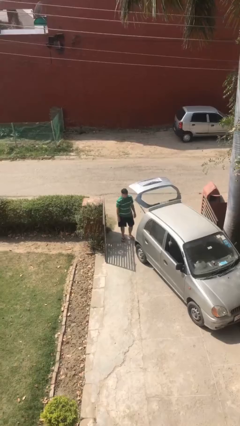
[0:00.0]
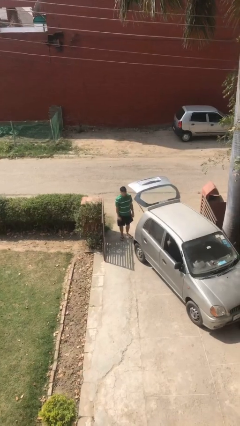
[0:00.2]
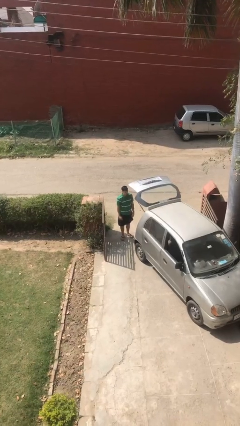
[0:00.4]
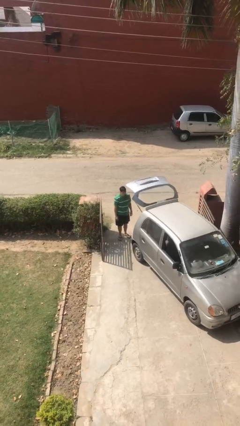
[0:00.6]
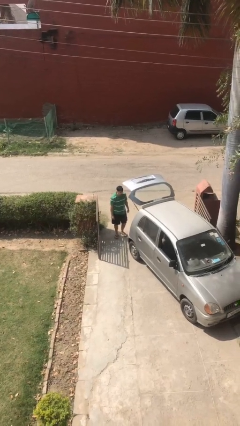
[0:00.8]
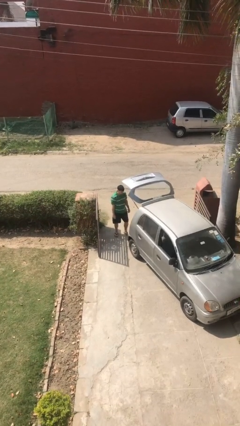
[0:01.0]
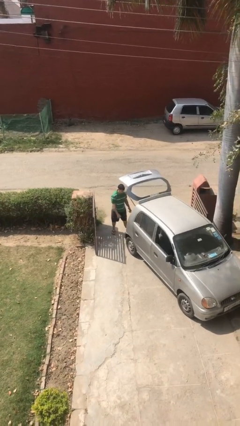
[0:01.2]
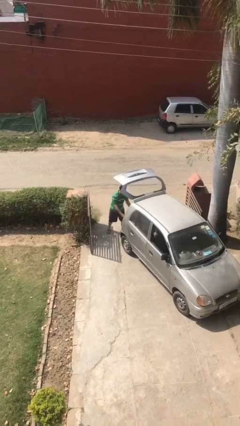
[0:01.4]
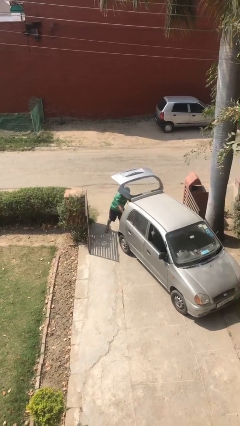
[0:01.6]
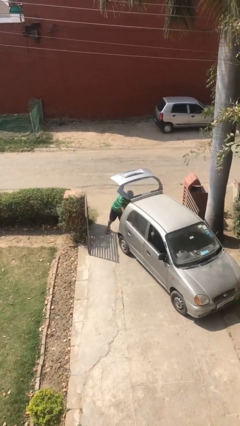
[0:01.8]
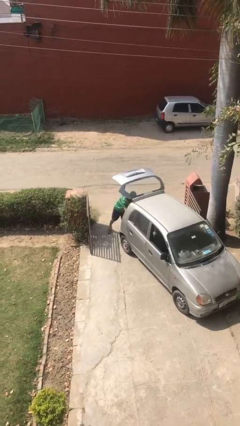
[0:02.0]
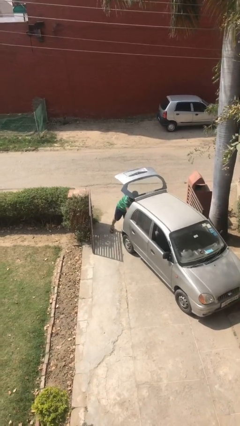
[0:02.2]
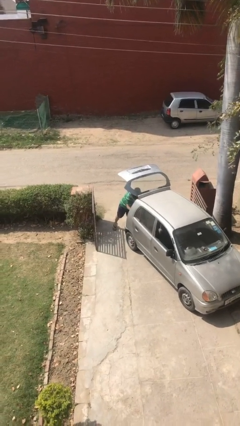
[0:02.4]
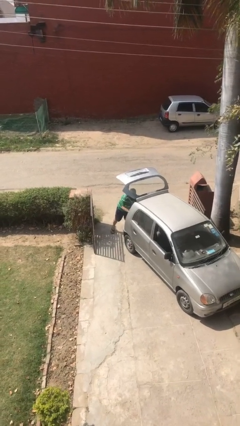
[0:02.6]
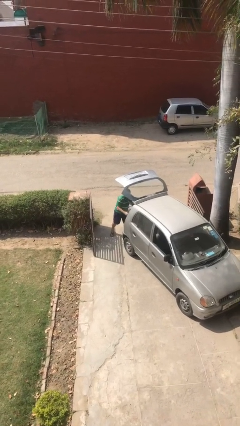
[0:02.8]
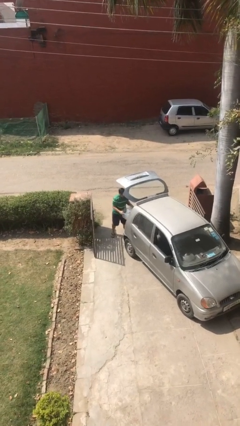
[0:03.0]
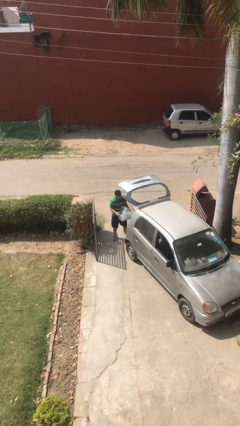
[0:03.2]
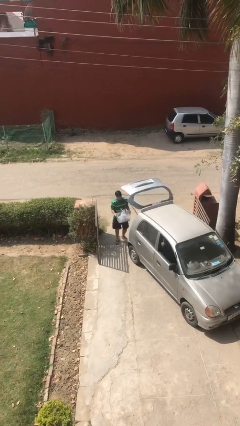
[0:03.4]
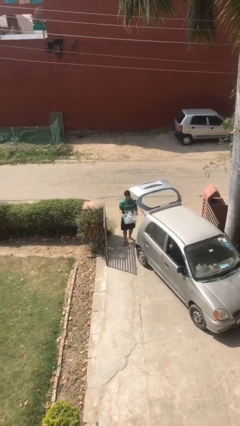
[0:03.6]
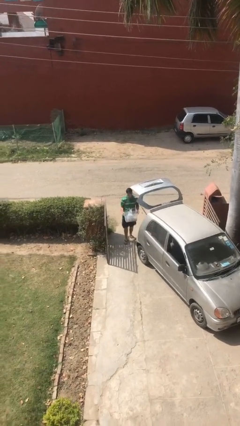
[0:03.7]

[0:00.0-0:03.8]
person unloads car

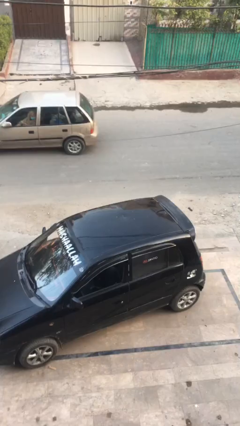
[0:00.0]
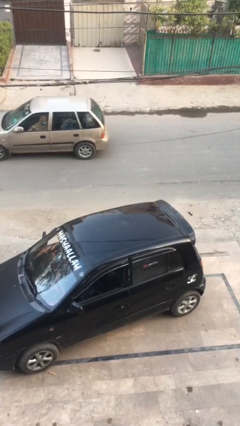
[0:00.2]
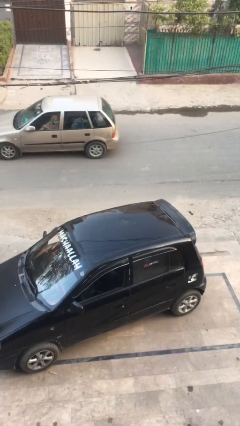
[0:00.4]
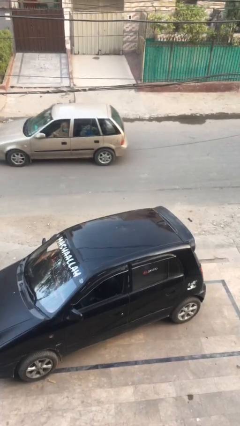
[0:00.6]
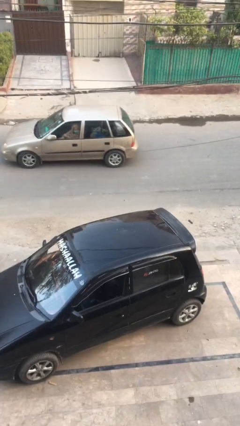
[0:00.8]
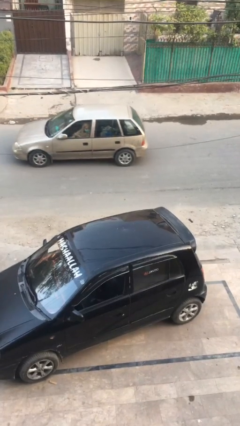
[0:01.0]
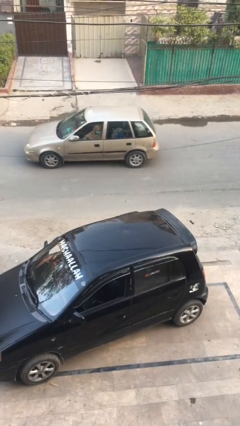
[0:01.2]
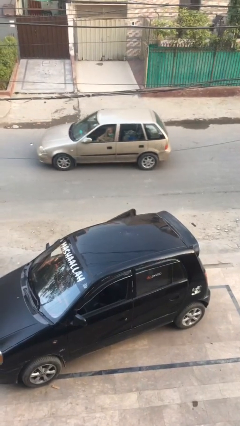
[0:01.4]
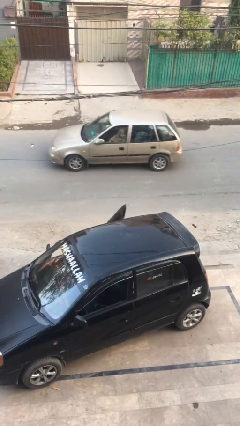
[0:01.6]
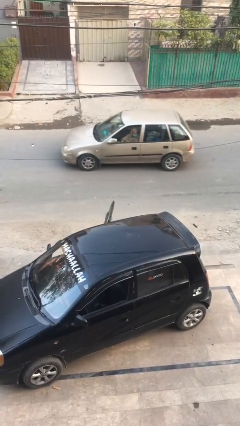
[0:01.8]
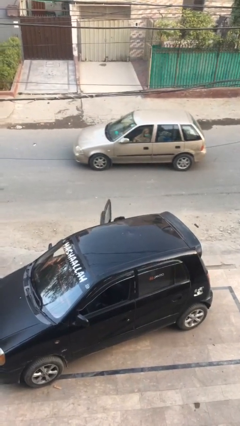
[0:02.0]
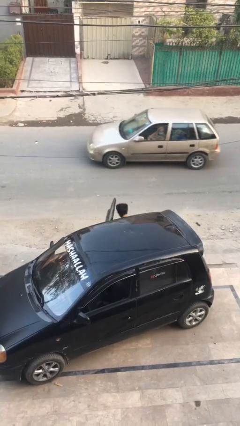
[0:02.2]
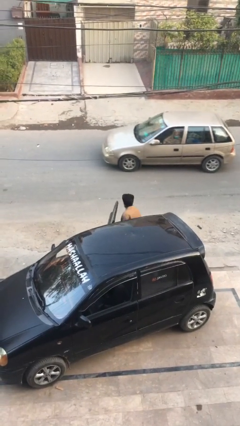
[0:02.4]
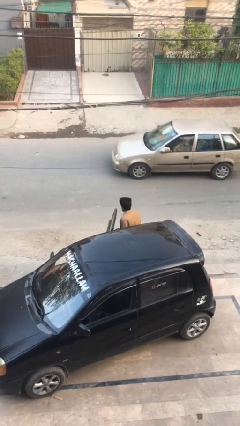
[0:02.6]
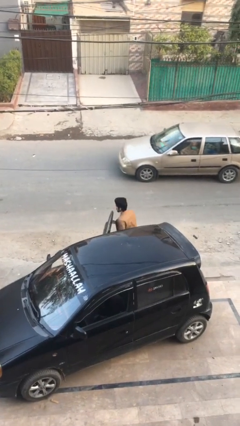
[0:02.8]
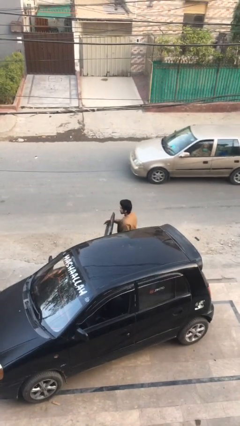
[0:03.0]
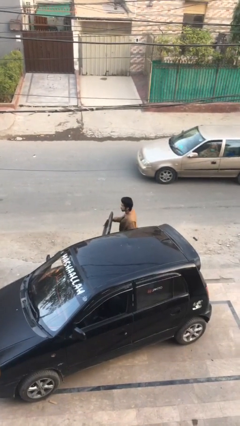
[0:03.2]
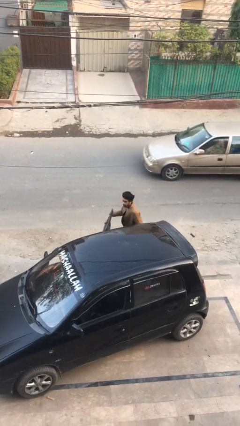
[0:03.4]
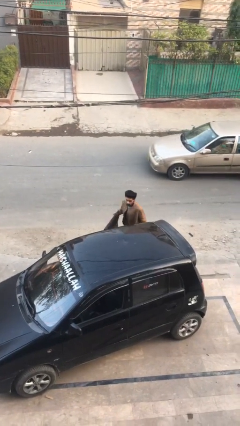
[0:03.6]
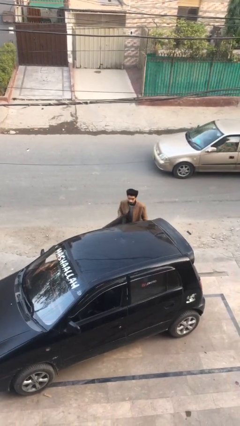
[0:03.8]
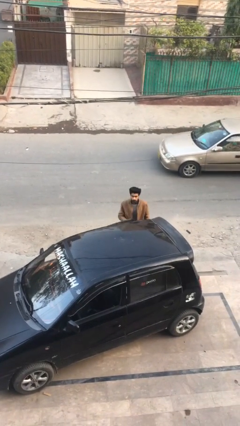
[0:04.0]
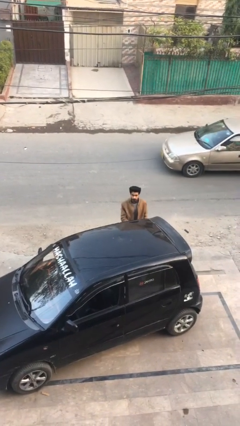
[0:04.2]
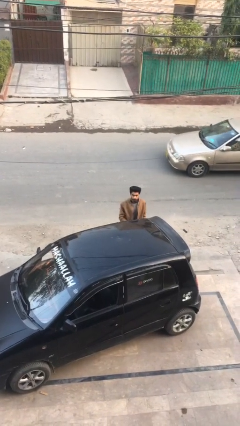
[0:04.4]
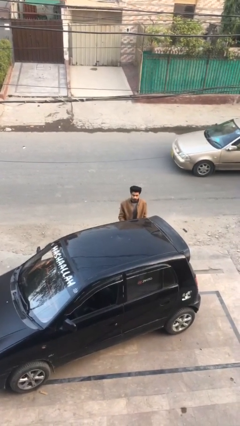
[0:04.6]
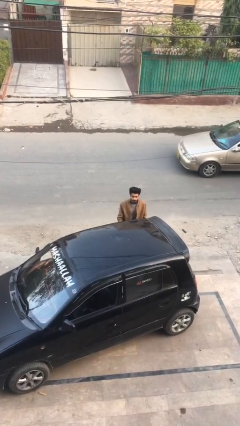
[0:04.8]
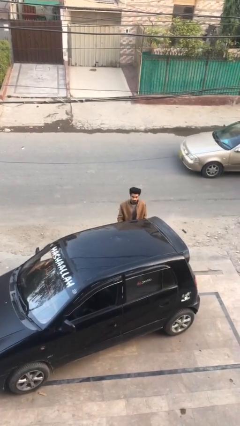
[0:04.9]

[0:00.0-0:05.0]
person exits car

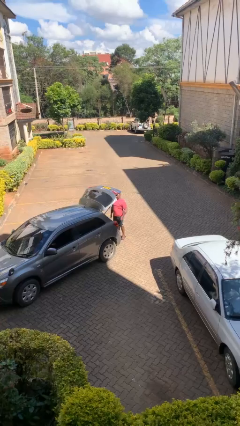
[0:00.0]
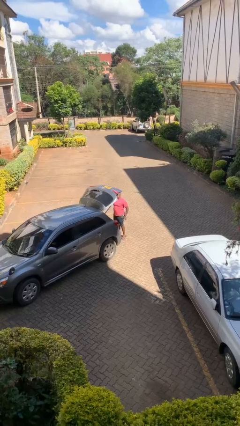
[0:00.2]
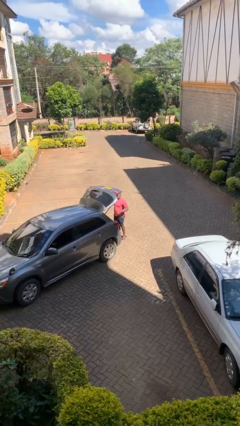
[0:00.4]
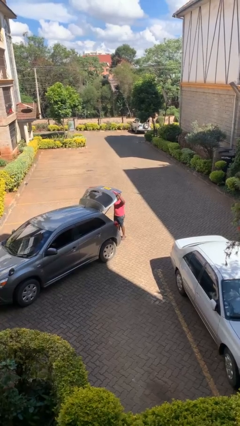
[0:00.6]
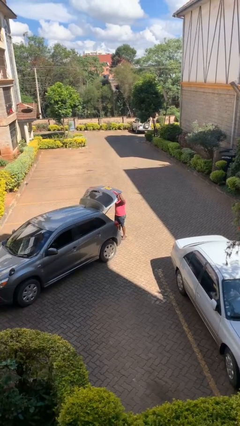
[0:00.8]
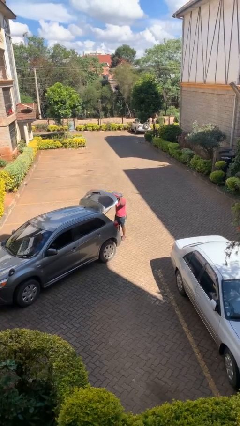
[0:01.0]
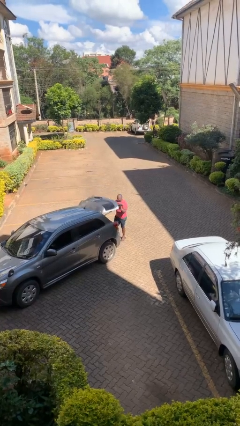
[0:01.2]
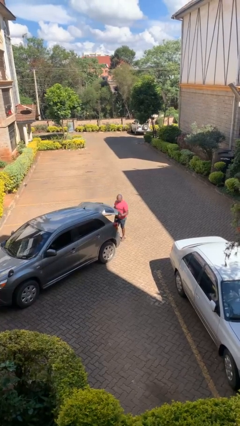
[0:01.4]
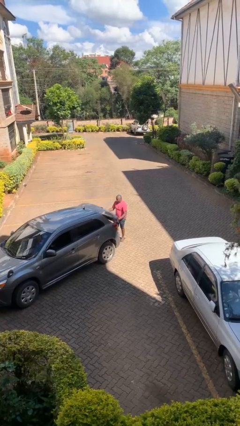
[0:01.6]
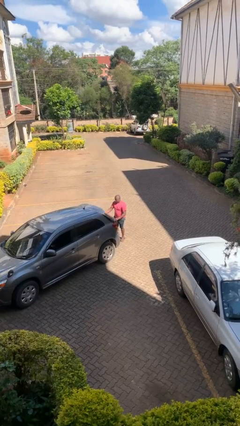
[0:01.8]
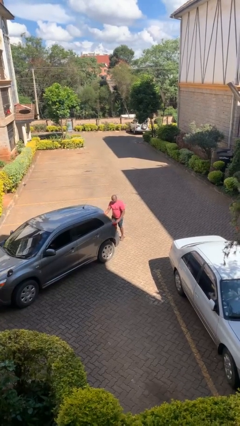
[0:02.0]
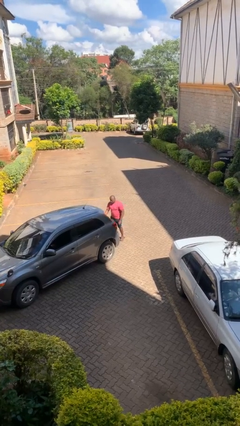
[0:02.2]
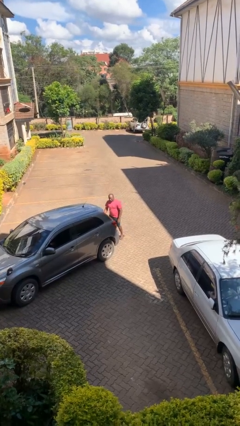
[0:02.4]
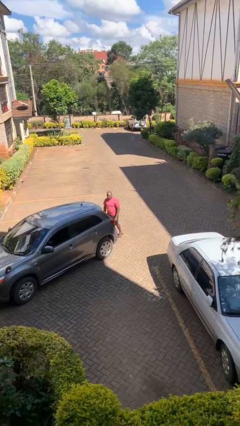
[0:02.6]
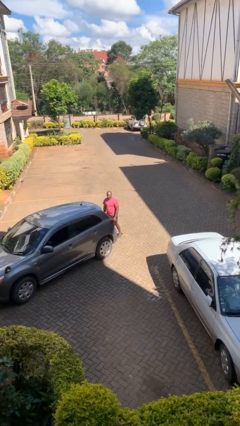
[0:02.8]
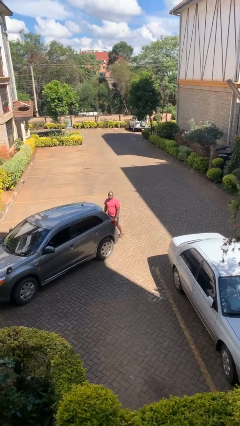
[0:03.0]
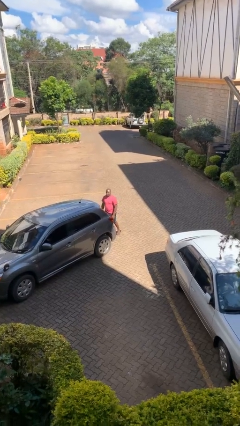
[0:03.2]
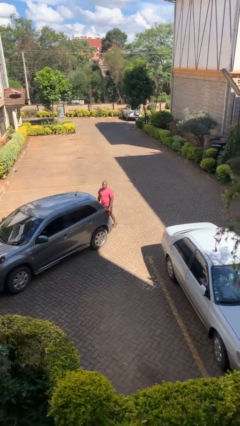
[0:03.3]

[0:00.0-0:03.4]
person closes car trunk

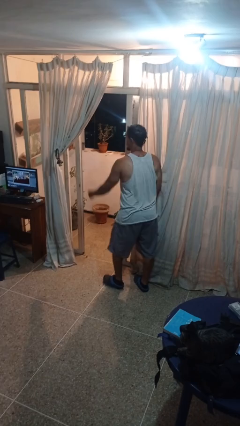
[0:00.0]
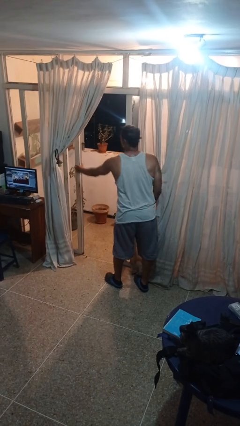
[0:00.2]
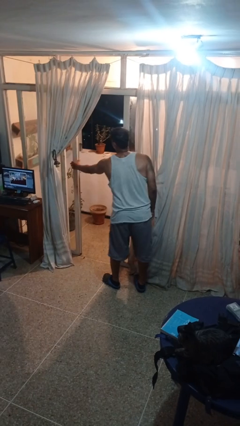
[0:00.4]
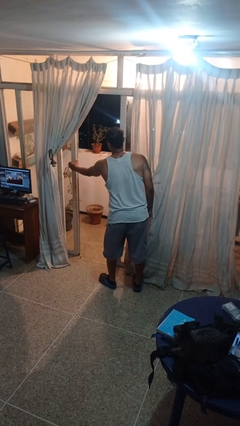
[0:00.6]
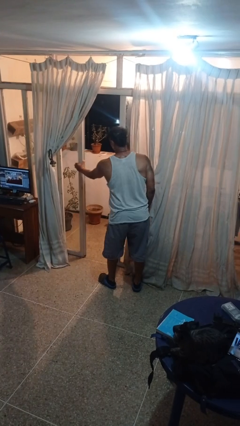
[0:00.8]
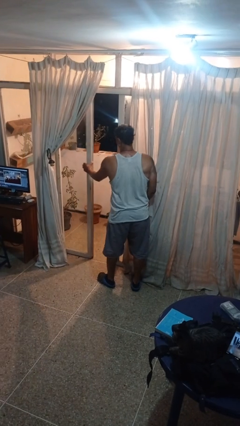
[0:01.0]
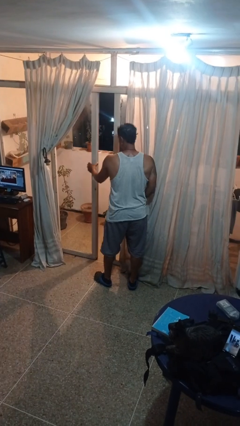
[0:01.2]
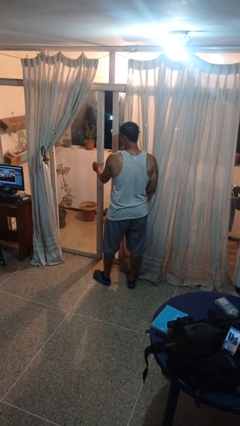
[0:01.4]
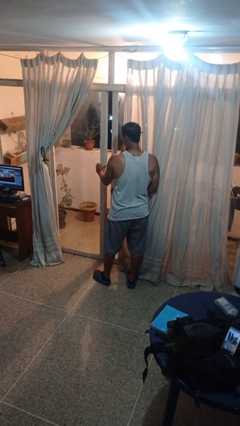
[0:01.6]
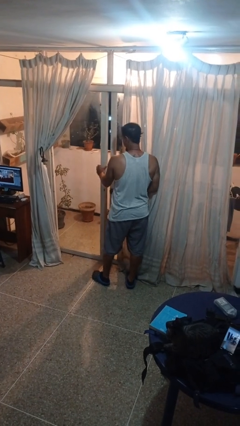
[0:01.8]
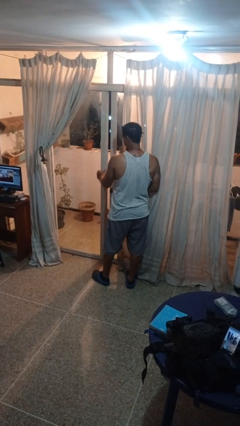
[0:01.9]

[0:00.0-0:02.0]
person closes sliding door

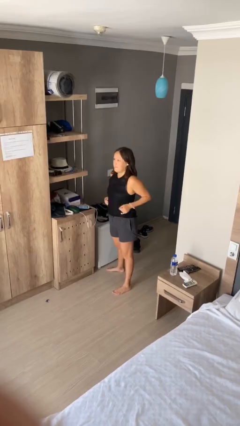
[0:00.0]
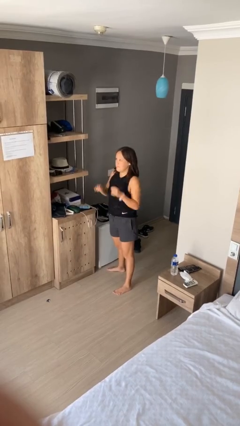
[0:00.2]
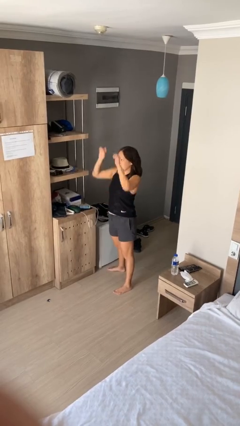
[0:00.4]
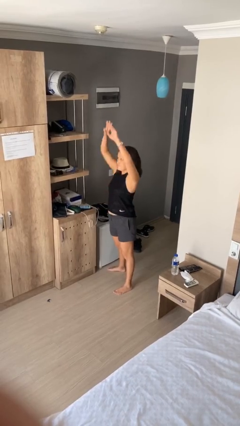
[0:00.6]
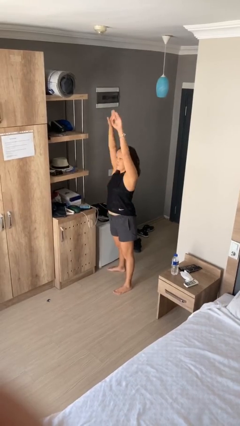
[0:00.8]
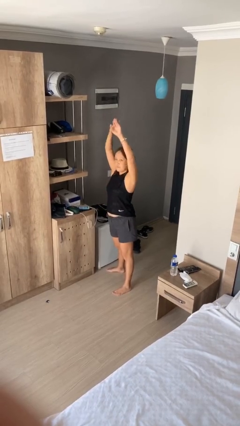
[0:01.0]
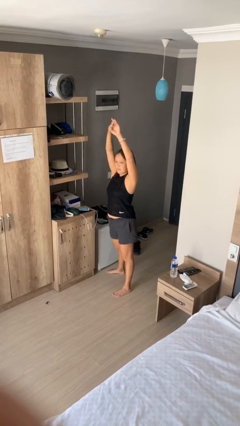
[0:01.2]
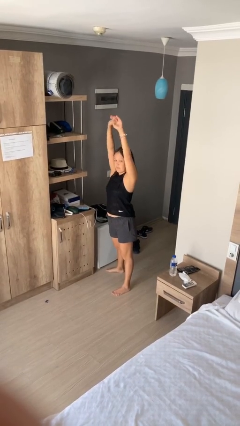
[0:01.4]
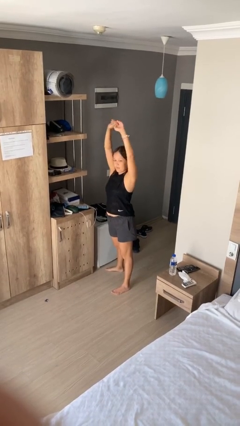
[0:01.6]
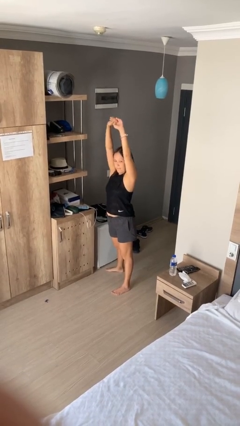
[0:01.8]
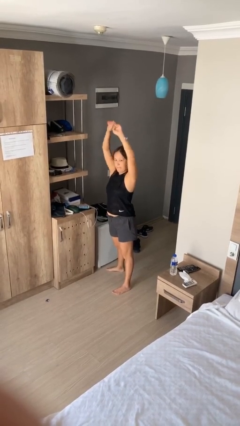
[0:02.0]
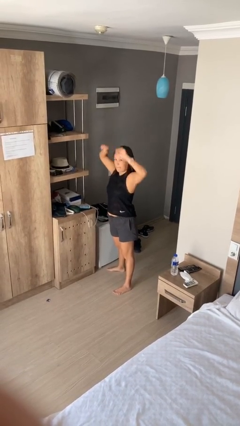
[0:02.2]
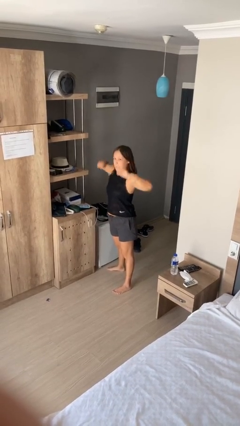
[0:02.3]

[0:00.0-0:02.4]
person stretches arms over head

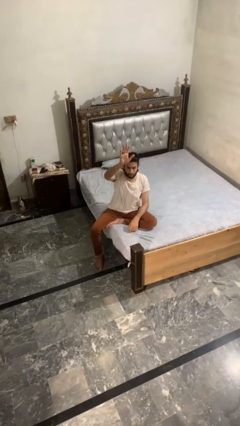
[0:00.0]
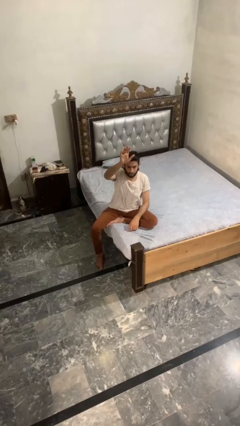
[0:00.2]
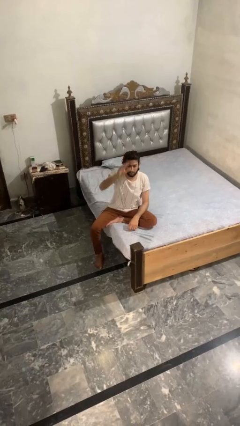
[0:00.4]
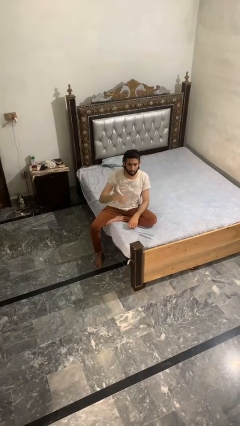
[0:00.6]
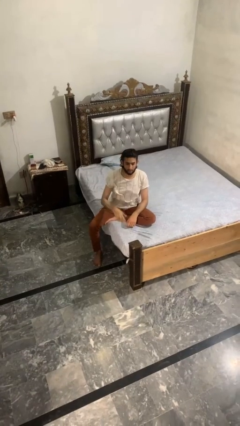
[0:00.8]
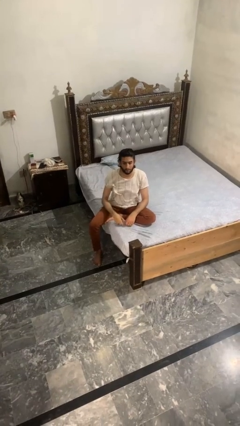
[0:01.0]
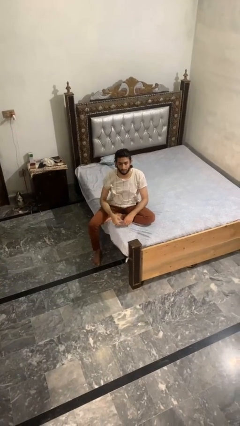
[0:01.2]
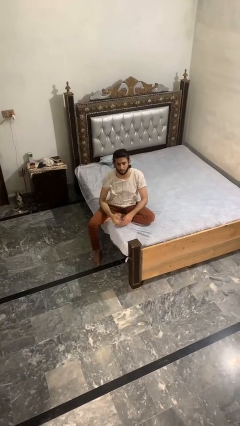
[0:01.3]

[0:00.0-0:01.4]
person gestures lower hand
